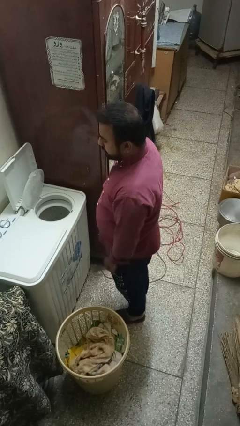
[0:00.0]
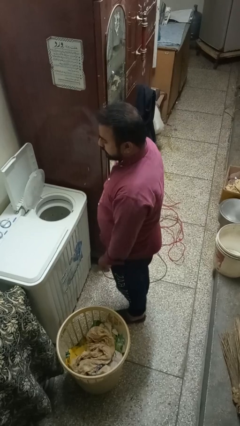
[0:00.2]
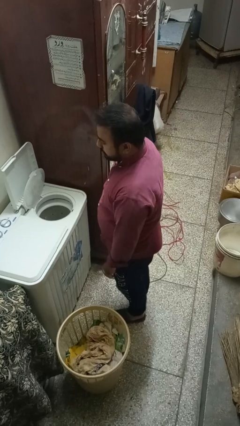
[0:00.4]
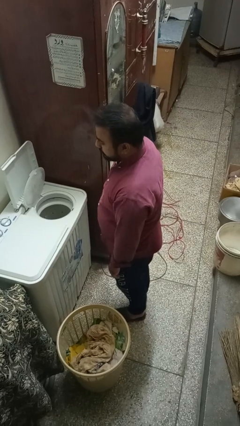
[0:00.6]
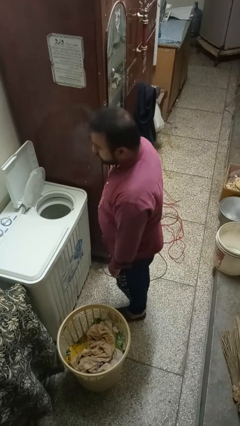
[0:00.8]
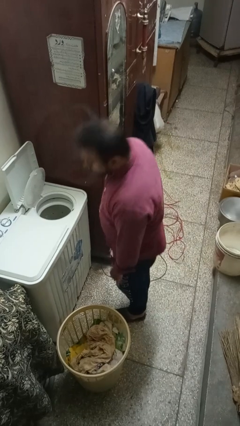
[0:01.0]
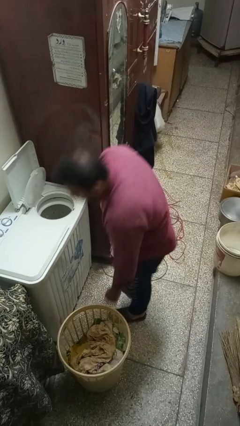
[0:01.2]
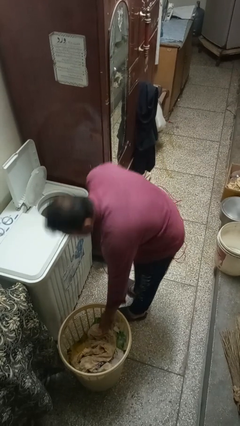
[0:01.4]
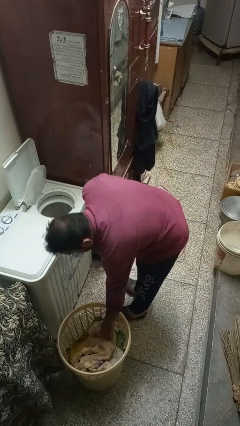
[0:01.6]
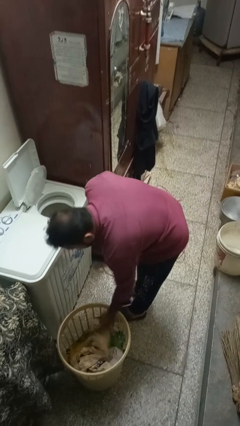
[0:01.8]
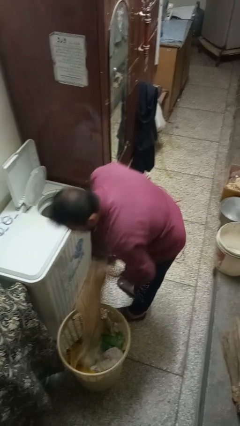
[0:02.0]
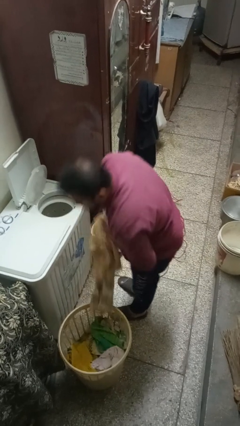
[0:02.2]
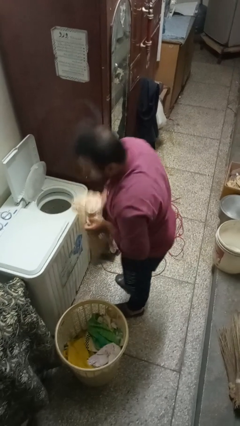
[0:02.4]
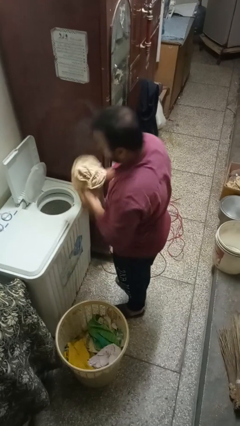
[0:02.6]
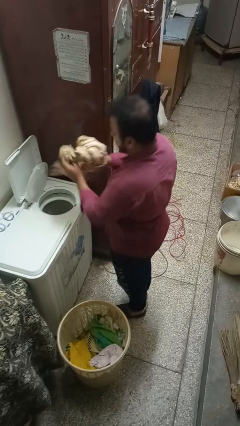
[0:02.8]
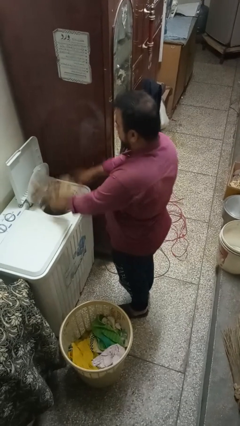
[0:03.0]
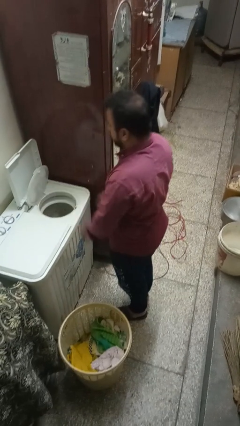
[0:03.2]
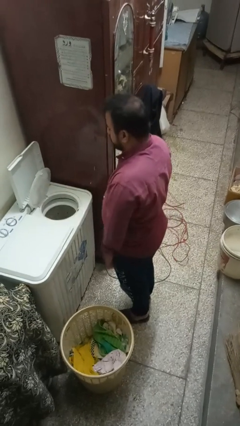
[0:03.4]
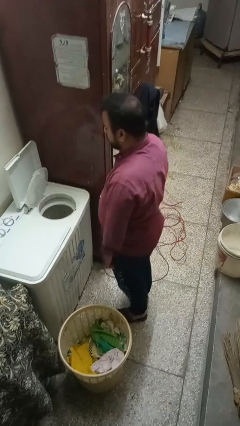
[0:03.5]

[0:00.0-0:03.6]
person loads dryer

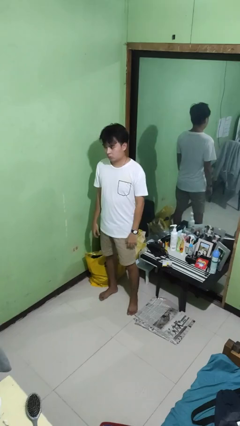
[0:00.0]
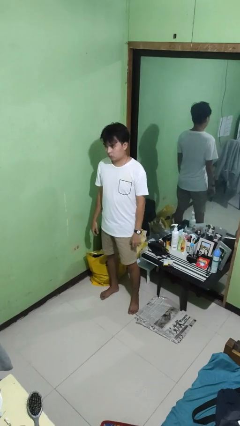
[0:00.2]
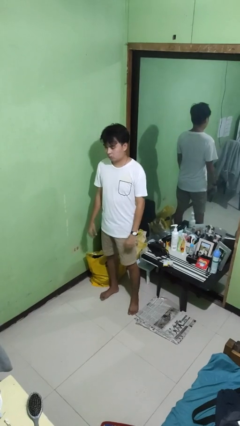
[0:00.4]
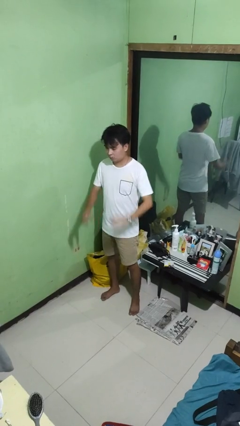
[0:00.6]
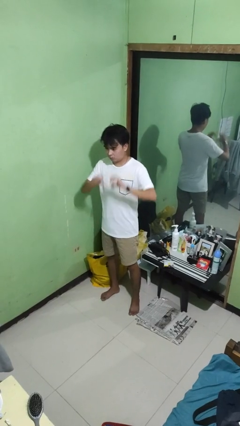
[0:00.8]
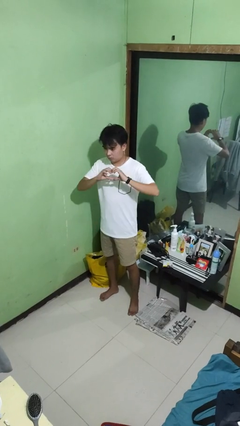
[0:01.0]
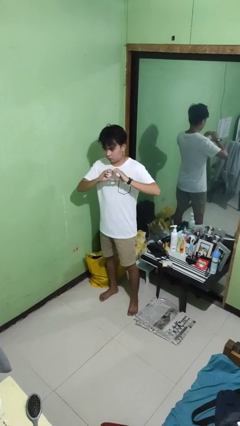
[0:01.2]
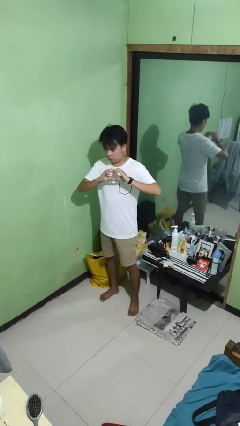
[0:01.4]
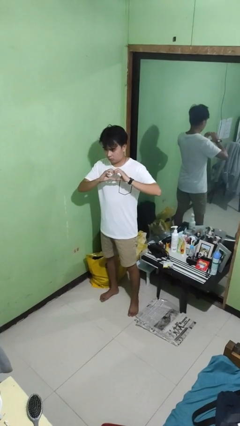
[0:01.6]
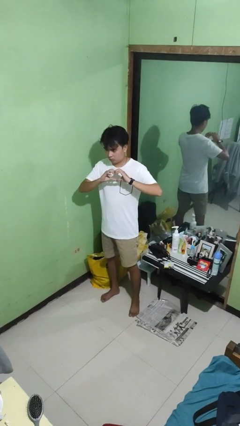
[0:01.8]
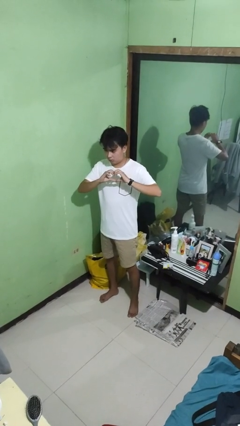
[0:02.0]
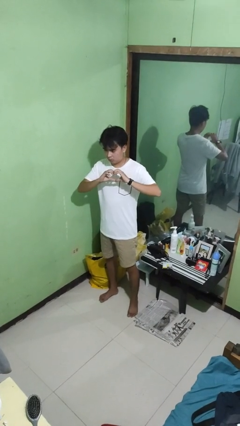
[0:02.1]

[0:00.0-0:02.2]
person gestures heart

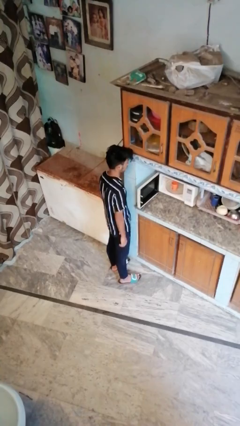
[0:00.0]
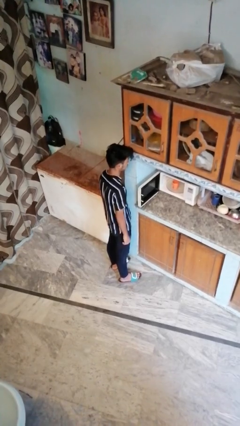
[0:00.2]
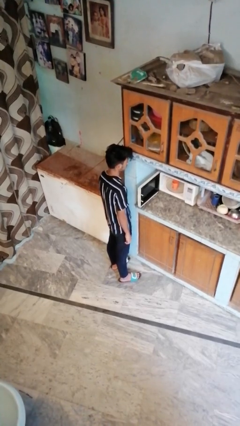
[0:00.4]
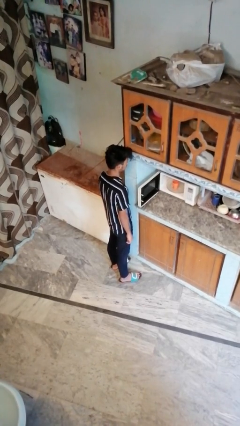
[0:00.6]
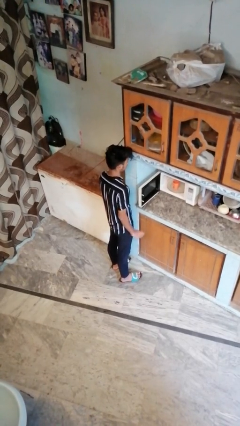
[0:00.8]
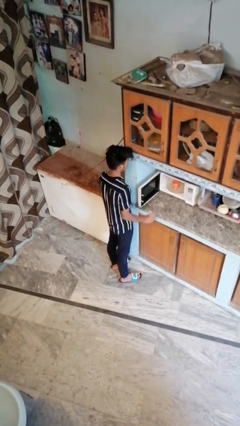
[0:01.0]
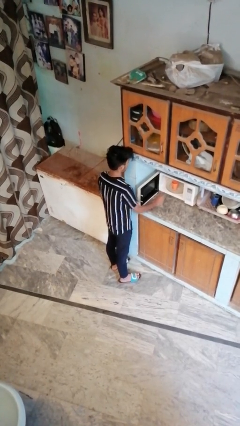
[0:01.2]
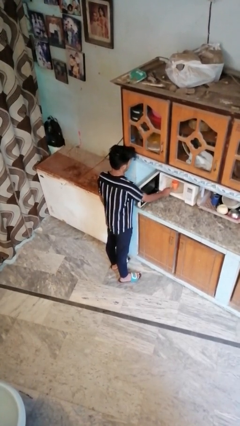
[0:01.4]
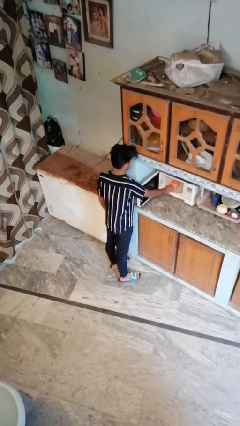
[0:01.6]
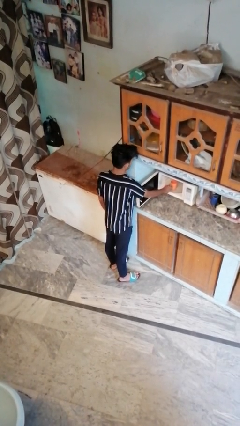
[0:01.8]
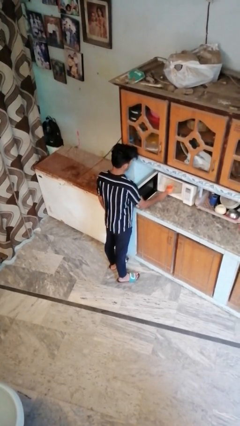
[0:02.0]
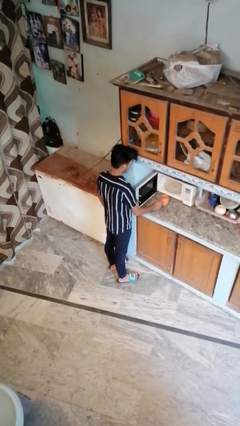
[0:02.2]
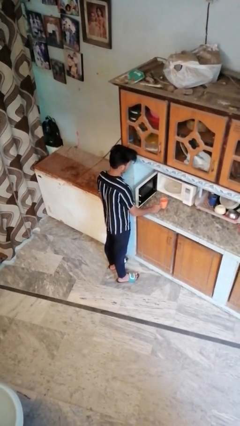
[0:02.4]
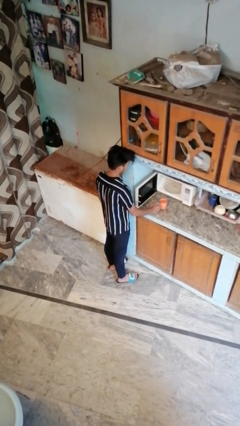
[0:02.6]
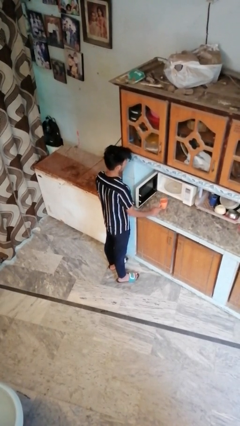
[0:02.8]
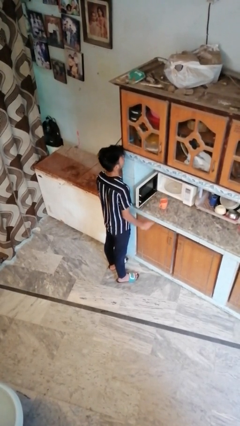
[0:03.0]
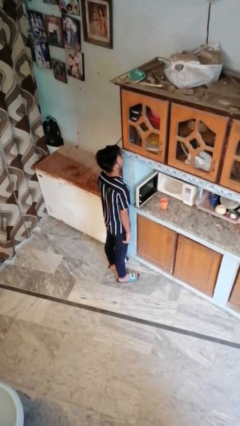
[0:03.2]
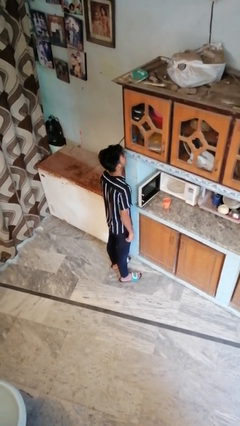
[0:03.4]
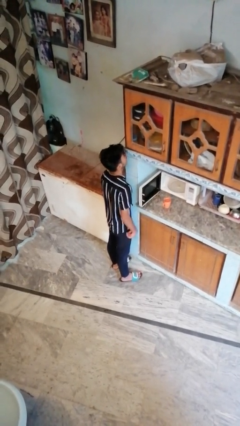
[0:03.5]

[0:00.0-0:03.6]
person takes object from microwave

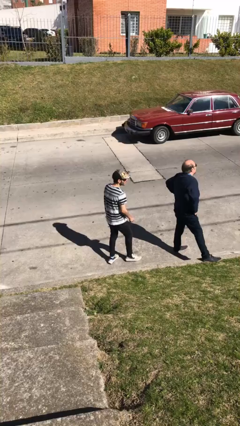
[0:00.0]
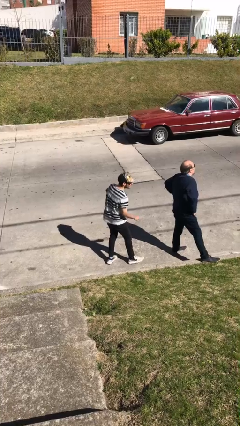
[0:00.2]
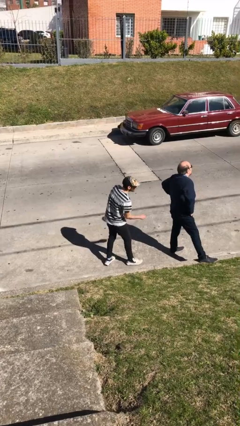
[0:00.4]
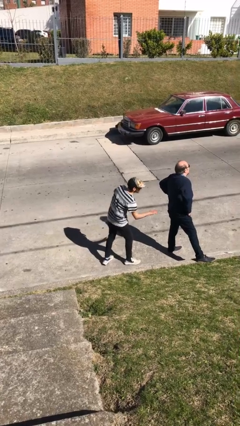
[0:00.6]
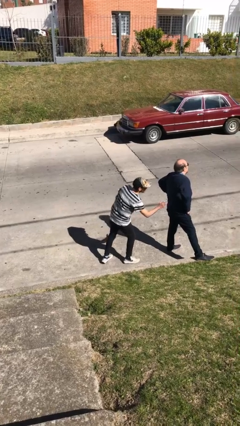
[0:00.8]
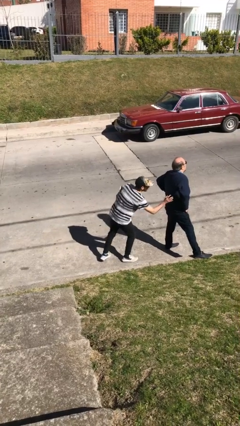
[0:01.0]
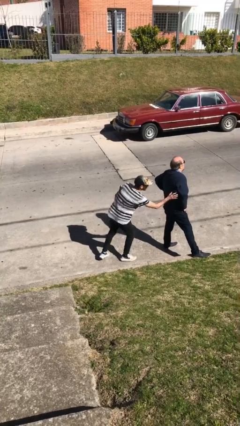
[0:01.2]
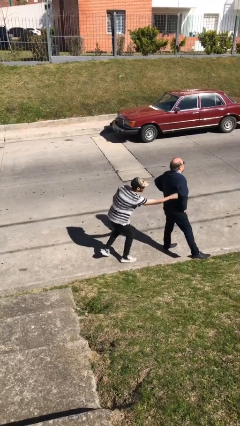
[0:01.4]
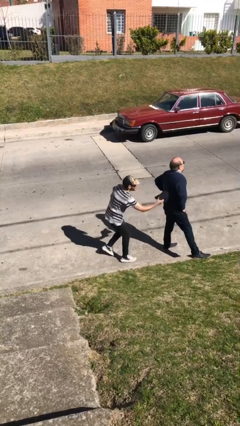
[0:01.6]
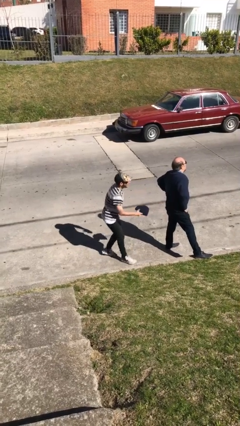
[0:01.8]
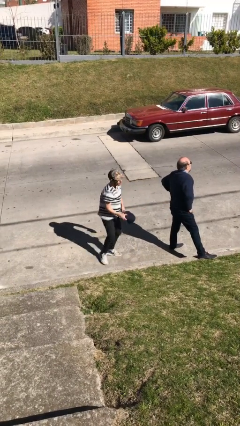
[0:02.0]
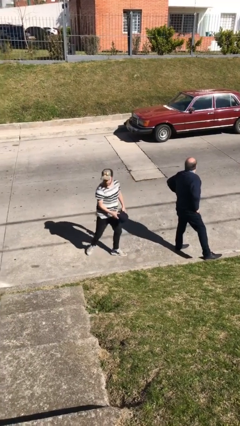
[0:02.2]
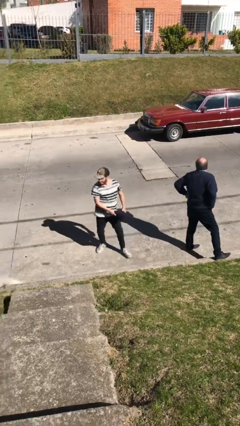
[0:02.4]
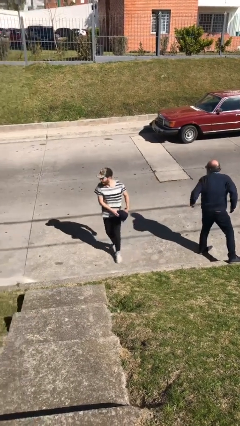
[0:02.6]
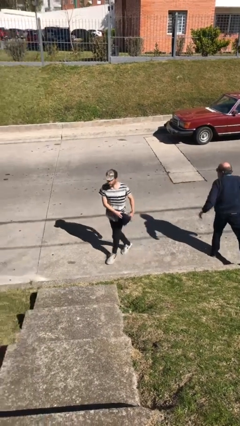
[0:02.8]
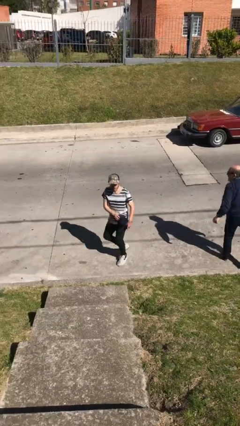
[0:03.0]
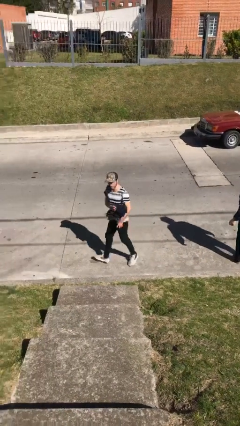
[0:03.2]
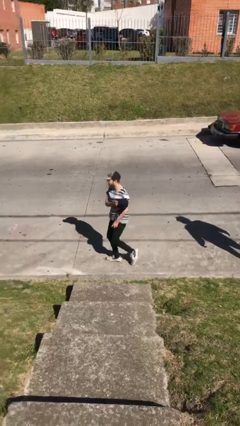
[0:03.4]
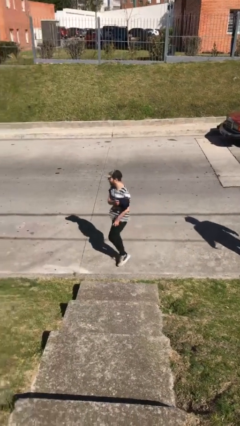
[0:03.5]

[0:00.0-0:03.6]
person steals object from person

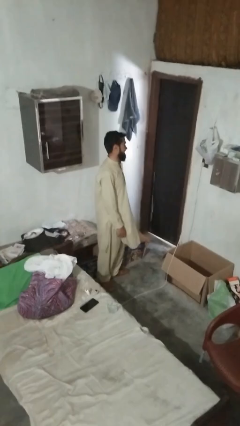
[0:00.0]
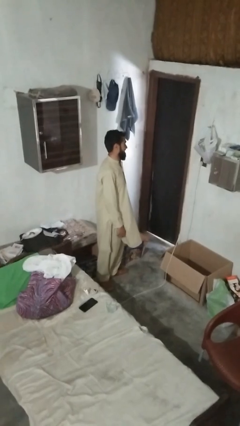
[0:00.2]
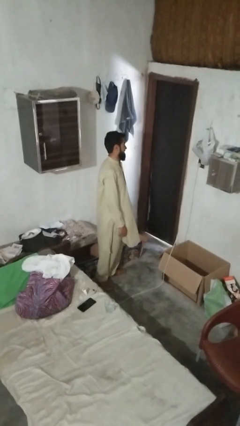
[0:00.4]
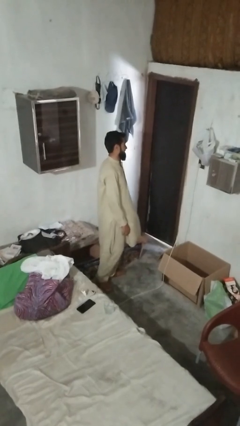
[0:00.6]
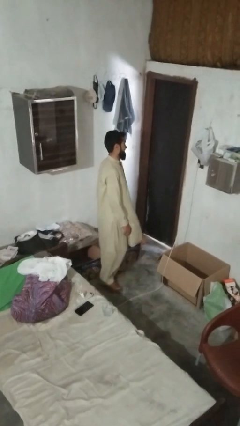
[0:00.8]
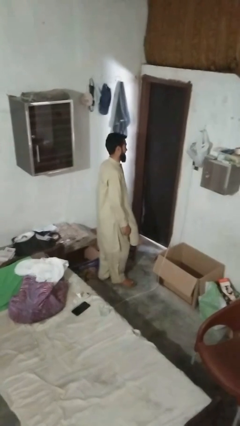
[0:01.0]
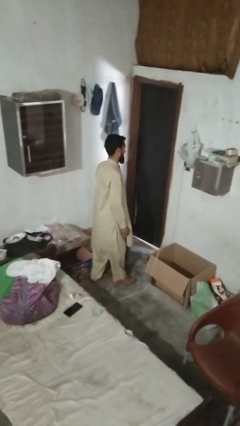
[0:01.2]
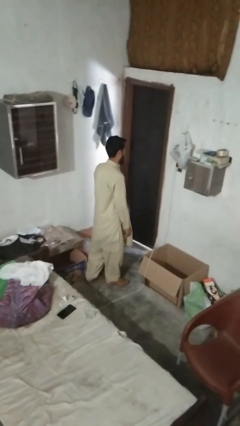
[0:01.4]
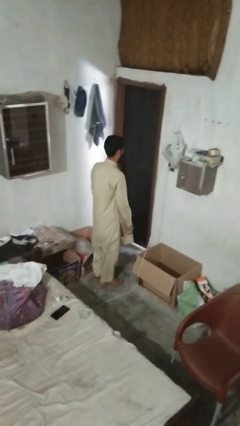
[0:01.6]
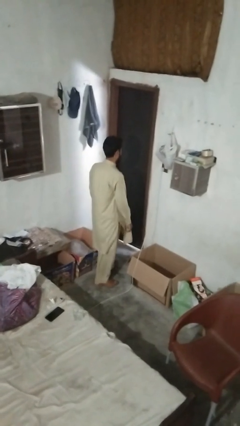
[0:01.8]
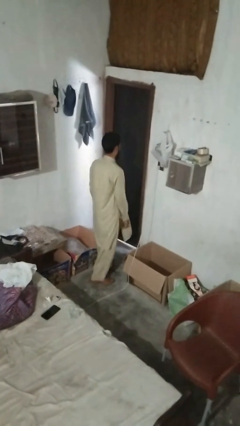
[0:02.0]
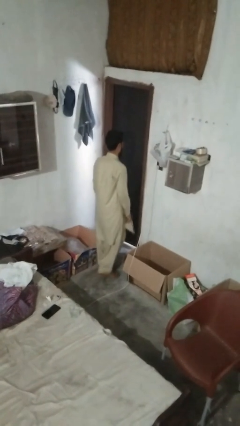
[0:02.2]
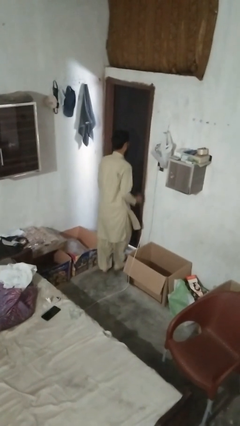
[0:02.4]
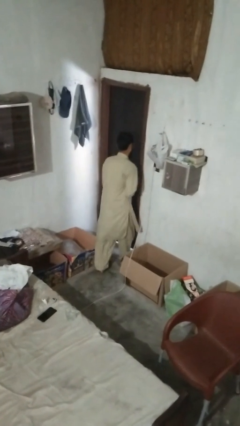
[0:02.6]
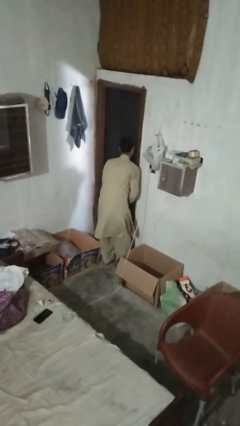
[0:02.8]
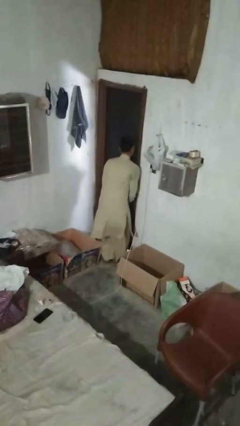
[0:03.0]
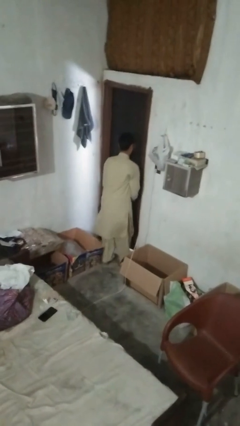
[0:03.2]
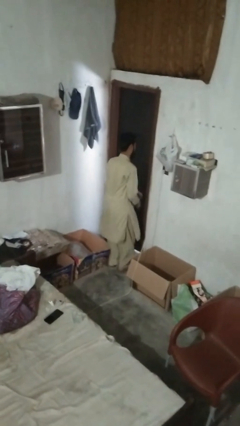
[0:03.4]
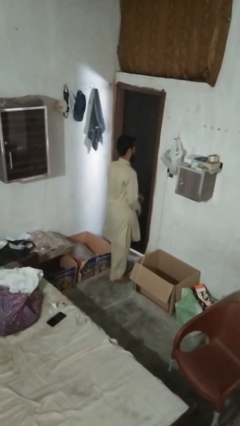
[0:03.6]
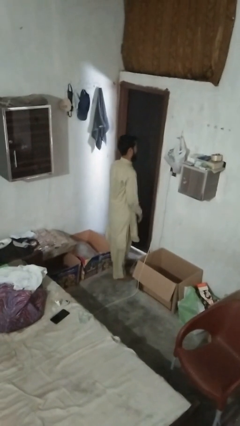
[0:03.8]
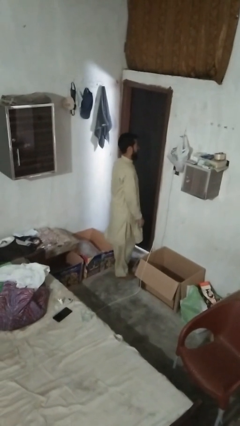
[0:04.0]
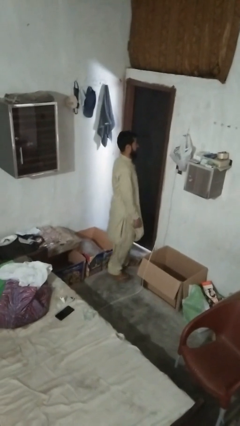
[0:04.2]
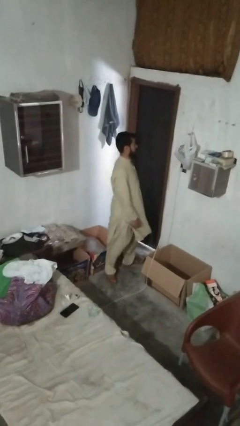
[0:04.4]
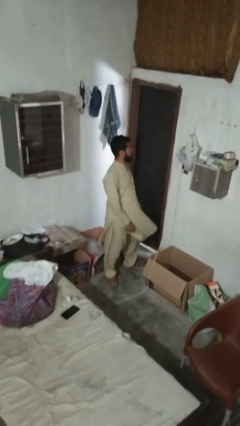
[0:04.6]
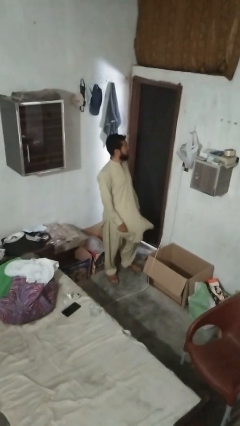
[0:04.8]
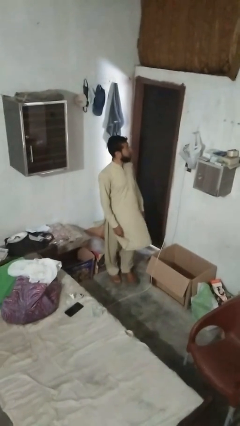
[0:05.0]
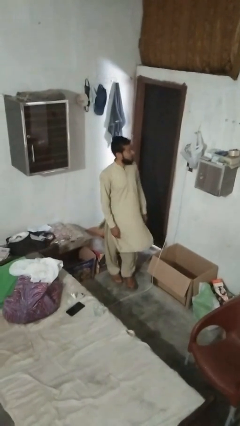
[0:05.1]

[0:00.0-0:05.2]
person bumps into wall
